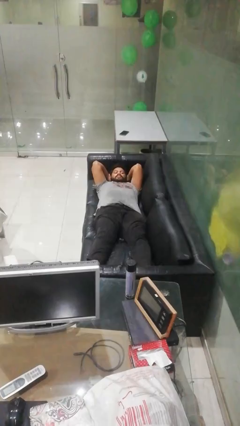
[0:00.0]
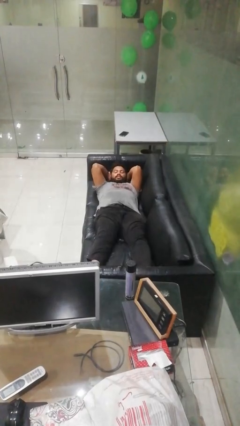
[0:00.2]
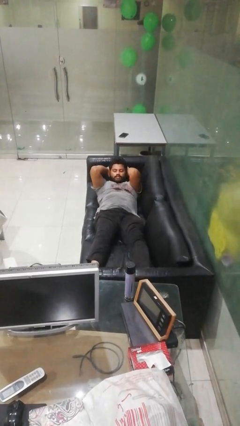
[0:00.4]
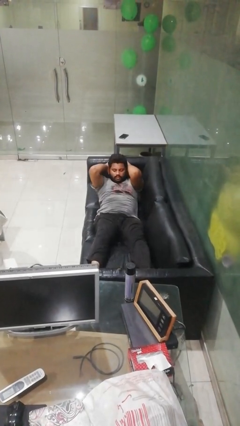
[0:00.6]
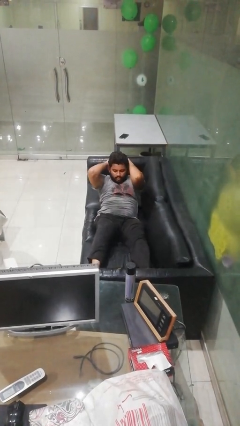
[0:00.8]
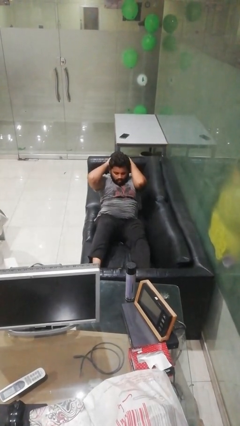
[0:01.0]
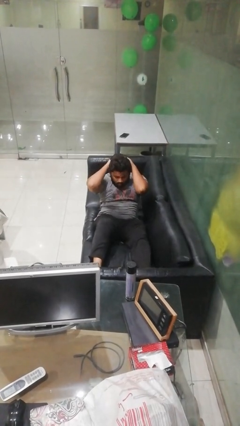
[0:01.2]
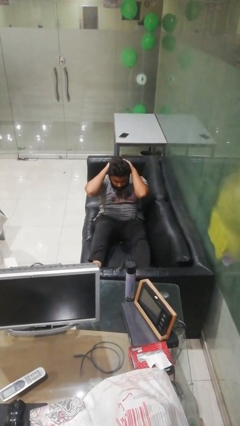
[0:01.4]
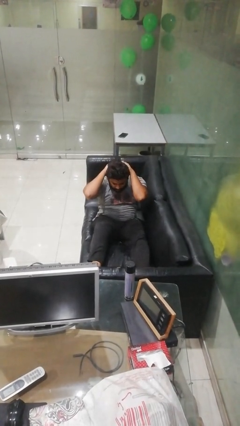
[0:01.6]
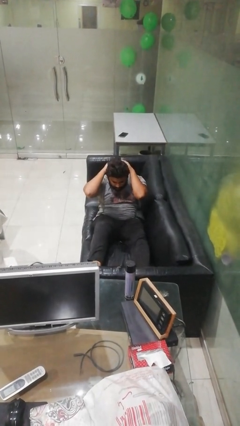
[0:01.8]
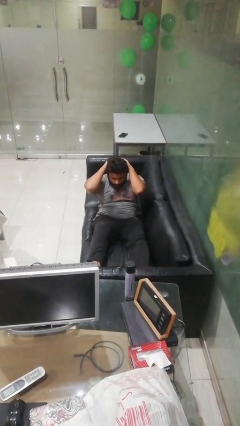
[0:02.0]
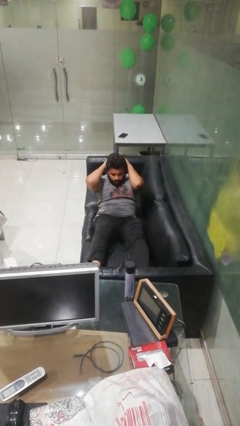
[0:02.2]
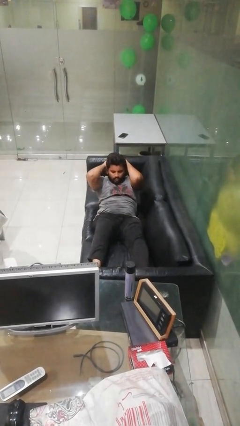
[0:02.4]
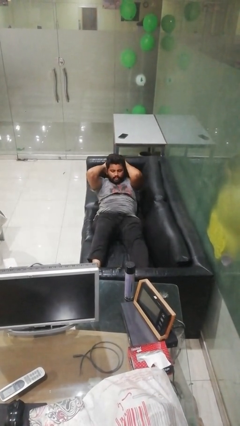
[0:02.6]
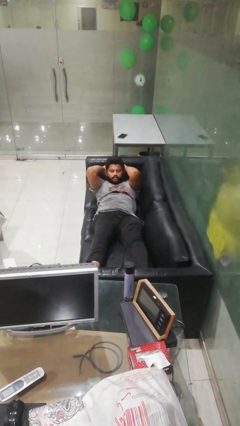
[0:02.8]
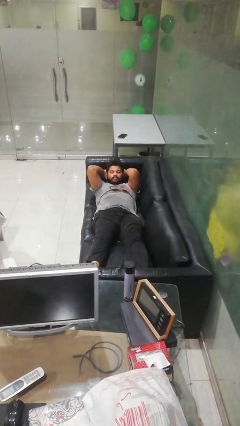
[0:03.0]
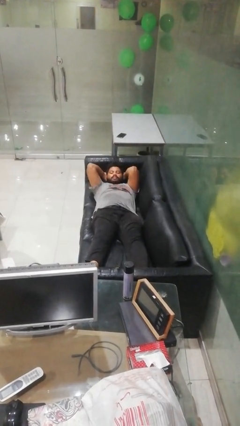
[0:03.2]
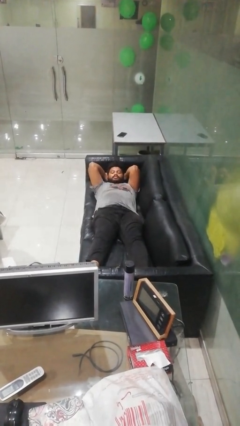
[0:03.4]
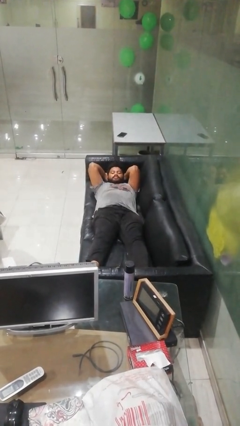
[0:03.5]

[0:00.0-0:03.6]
person exercises with situp

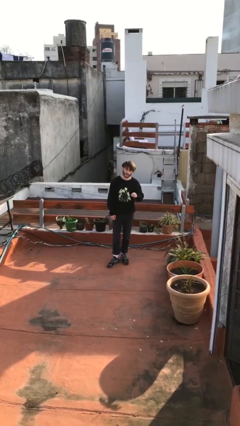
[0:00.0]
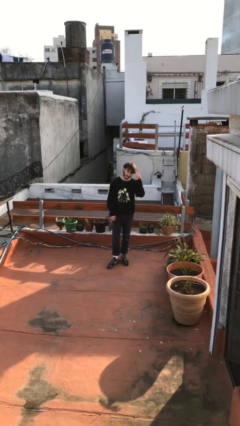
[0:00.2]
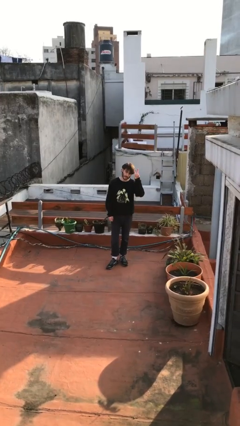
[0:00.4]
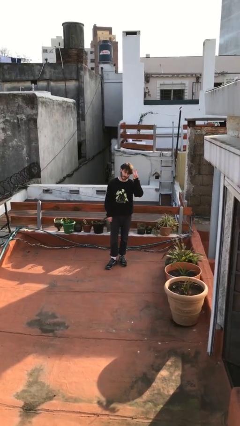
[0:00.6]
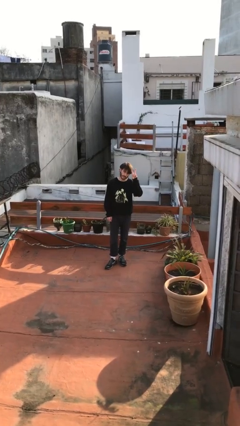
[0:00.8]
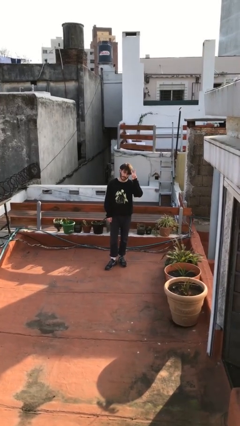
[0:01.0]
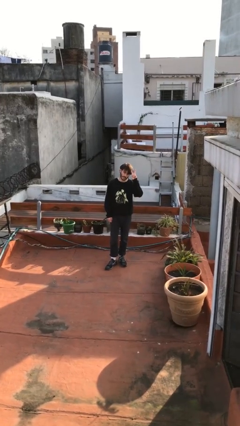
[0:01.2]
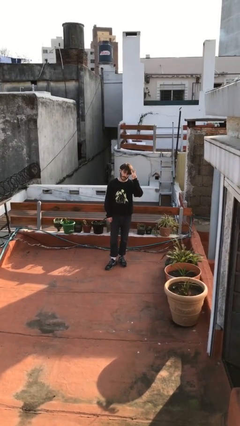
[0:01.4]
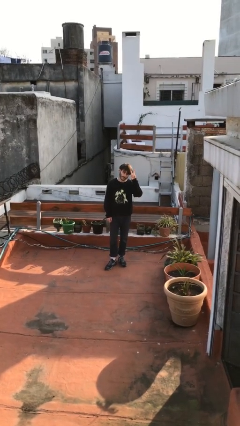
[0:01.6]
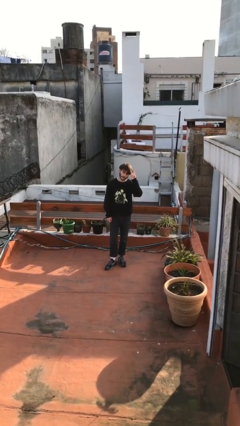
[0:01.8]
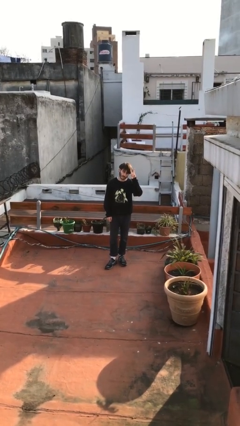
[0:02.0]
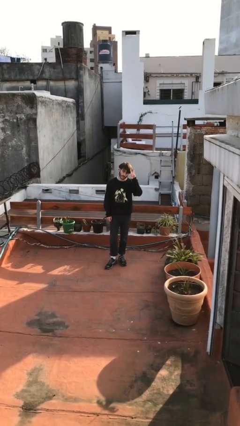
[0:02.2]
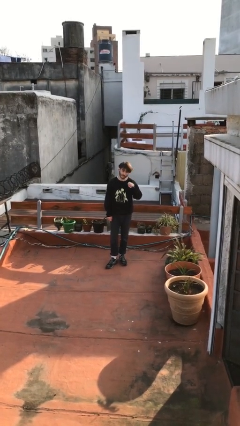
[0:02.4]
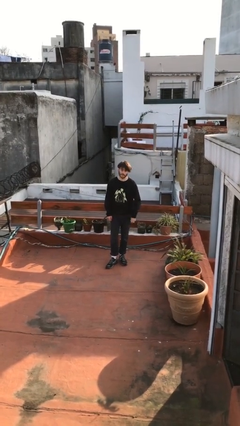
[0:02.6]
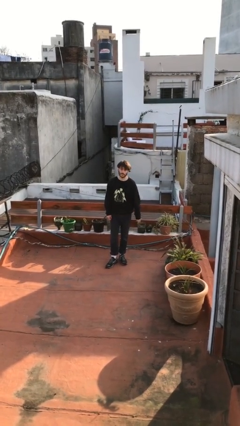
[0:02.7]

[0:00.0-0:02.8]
person gestures peace

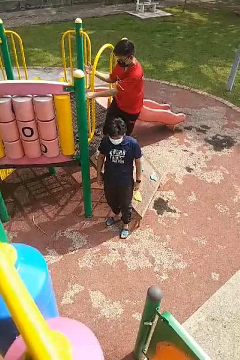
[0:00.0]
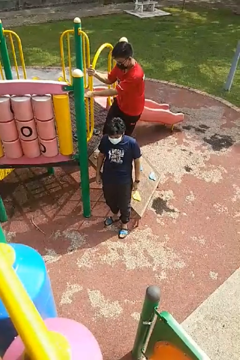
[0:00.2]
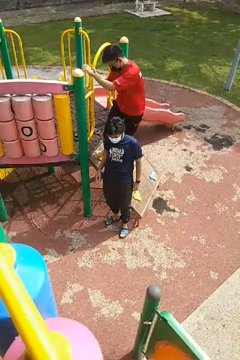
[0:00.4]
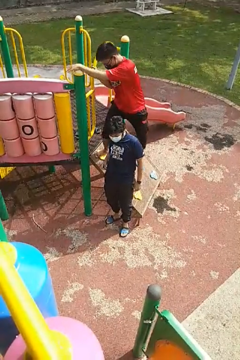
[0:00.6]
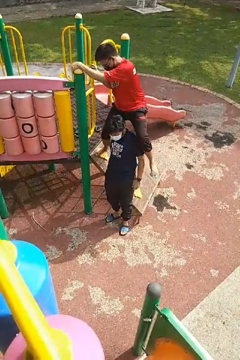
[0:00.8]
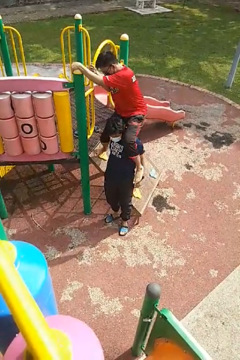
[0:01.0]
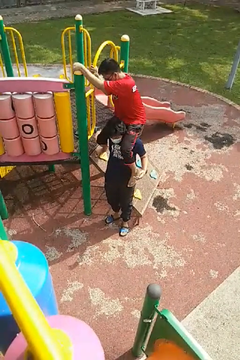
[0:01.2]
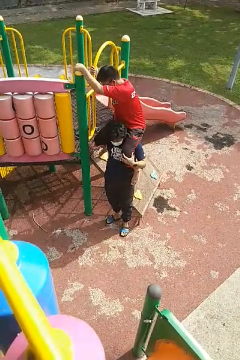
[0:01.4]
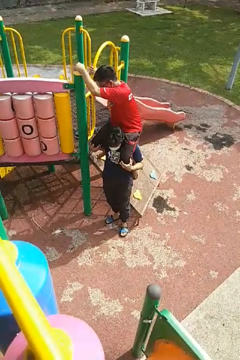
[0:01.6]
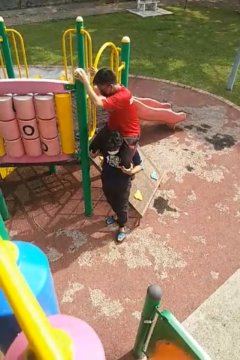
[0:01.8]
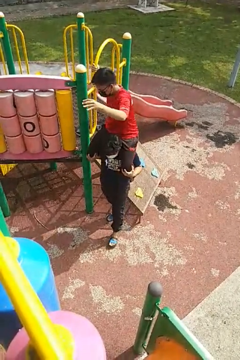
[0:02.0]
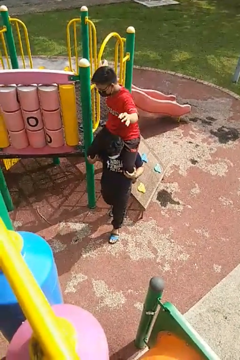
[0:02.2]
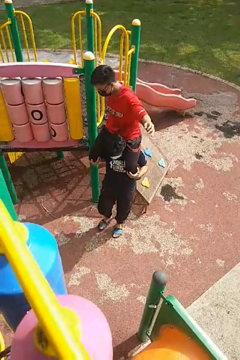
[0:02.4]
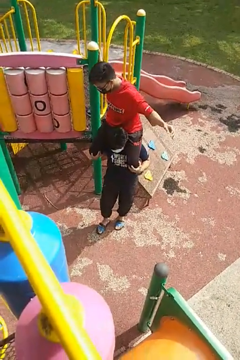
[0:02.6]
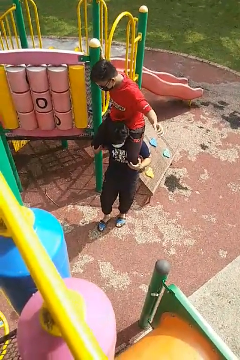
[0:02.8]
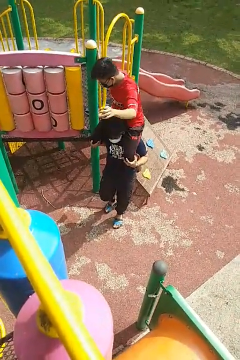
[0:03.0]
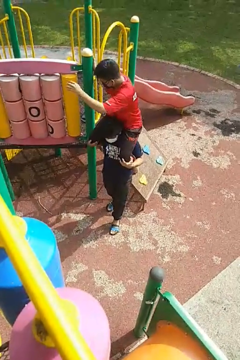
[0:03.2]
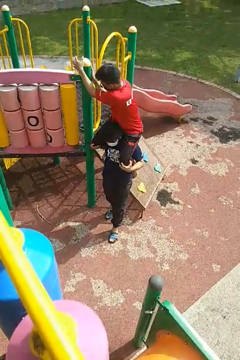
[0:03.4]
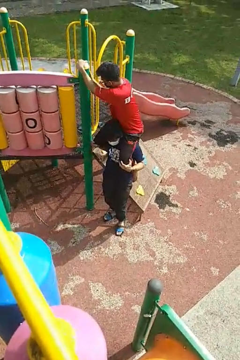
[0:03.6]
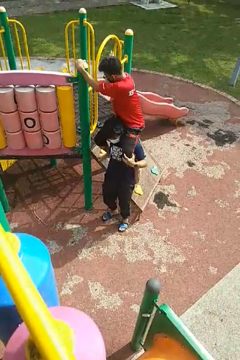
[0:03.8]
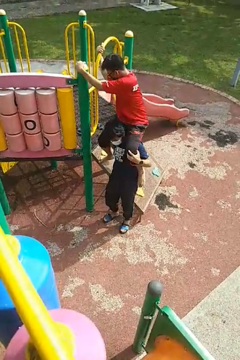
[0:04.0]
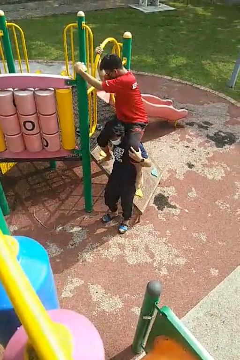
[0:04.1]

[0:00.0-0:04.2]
person carries person on shoulders

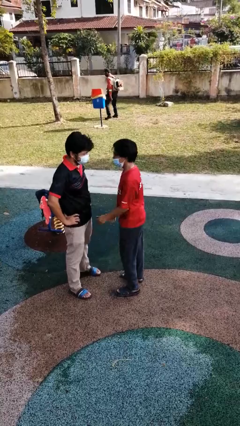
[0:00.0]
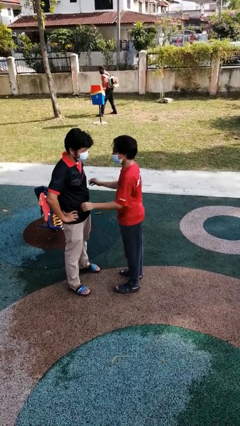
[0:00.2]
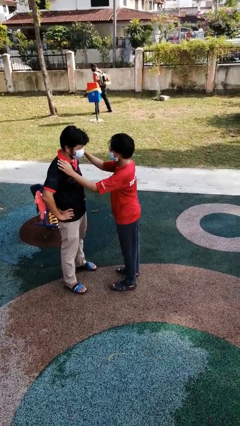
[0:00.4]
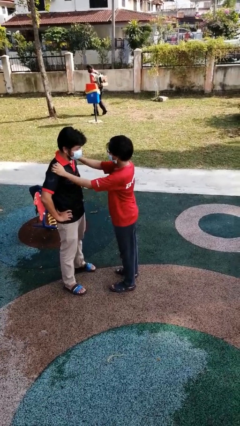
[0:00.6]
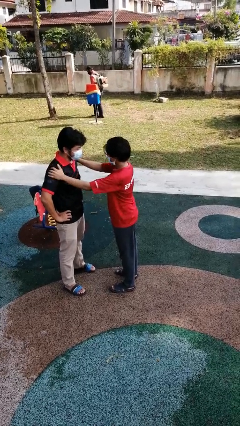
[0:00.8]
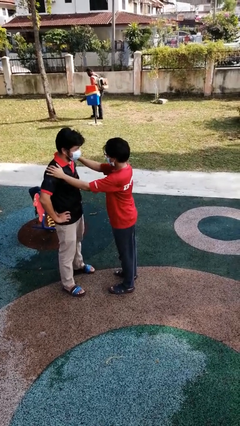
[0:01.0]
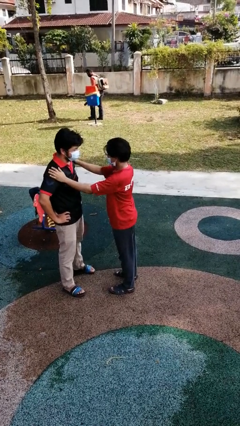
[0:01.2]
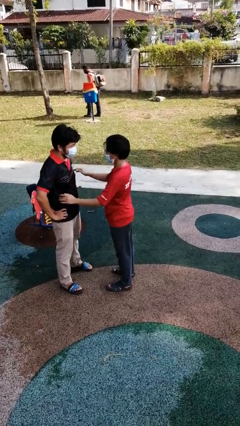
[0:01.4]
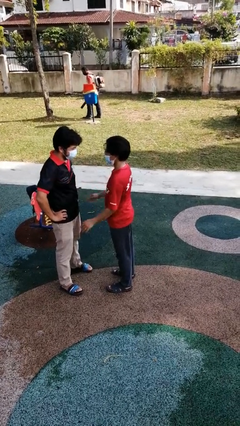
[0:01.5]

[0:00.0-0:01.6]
person pounds shoulders of person

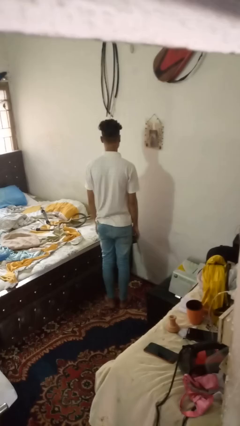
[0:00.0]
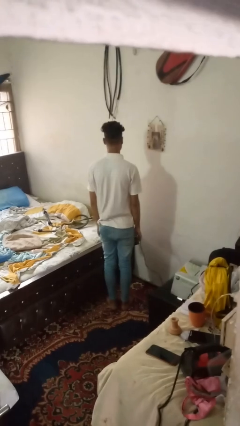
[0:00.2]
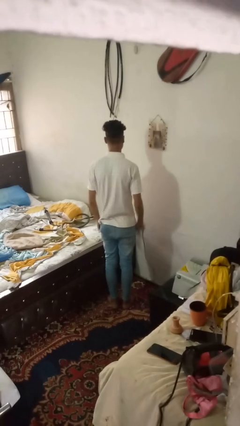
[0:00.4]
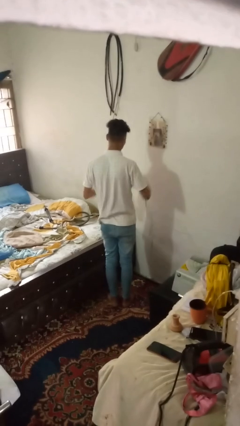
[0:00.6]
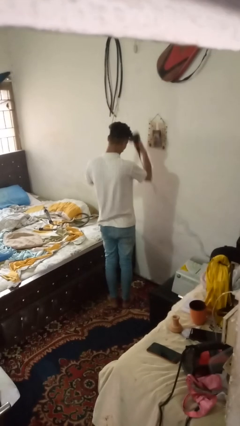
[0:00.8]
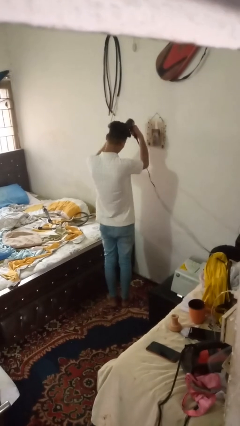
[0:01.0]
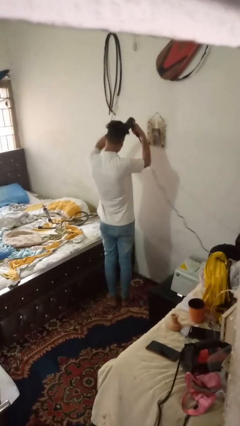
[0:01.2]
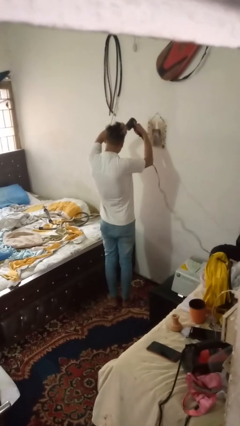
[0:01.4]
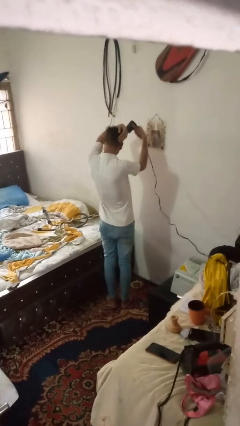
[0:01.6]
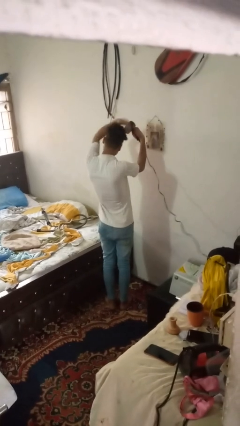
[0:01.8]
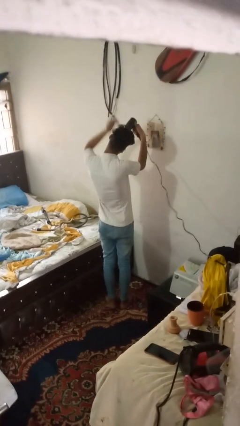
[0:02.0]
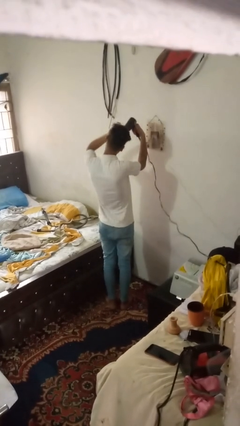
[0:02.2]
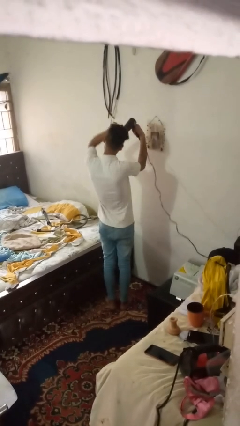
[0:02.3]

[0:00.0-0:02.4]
person dries hair with hairdryer

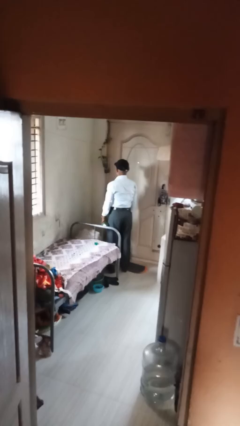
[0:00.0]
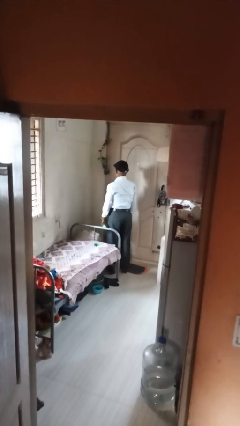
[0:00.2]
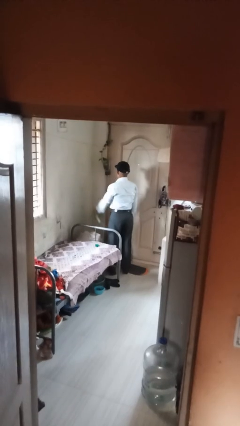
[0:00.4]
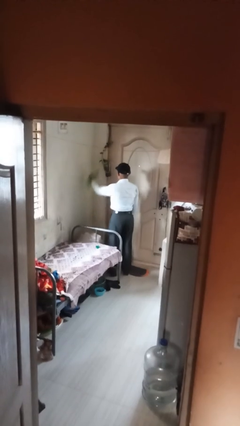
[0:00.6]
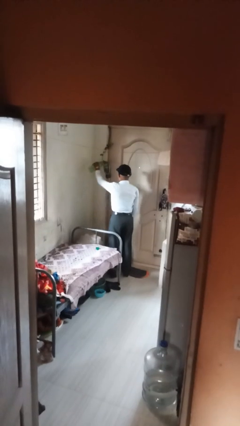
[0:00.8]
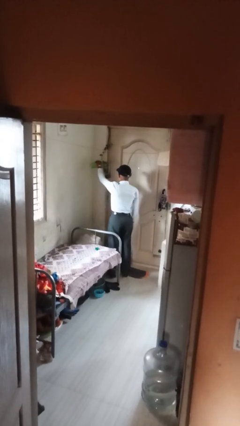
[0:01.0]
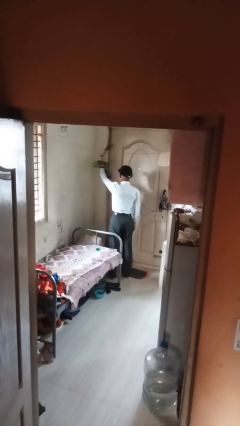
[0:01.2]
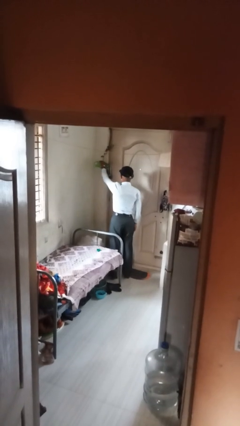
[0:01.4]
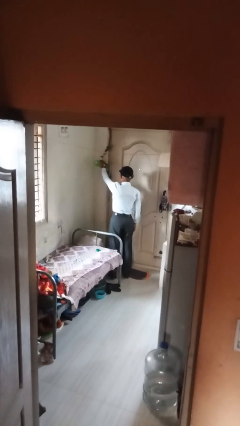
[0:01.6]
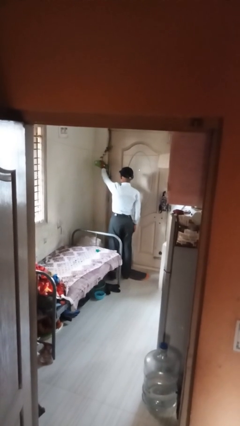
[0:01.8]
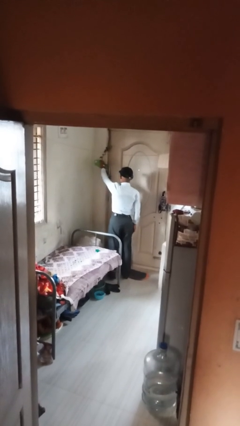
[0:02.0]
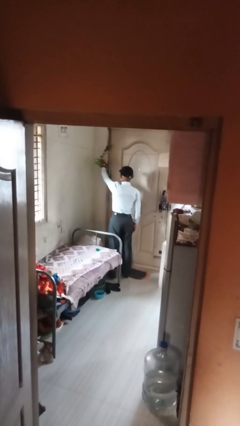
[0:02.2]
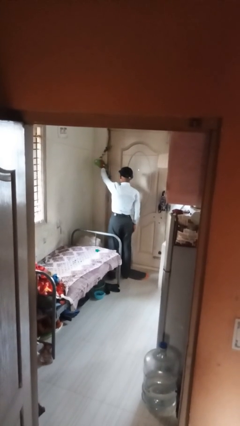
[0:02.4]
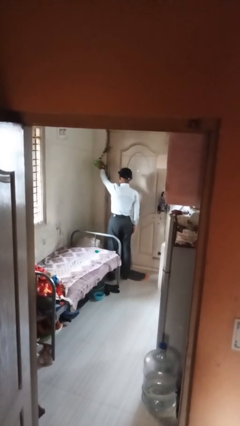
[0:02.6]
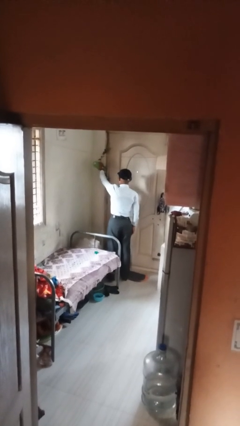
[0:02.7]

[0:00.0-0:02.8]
person waters houseplant

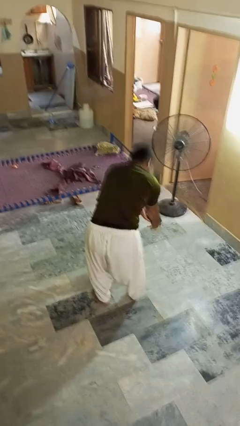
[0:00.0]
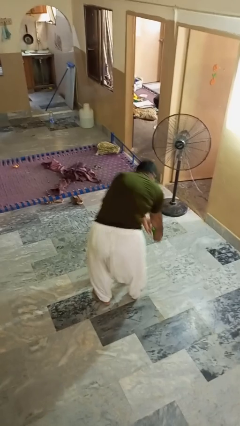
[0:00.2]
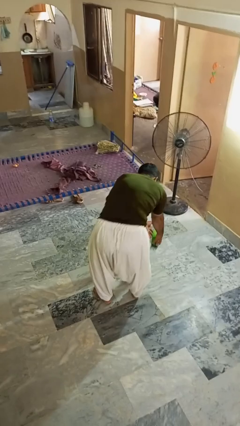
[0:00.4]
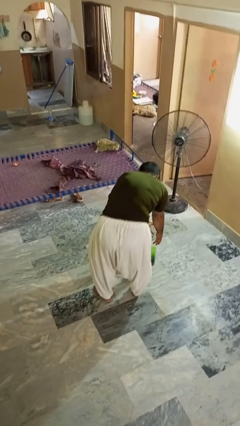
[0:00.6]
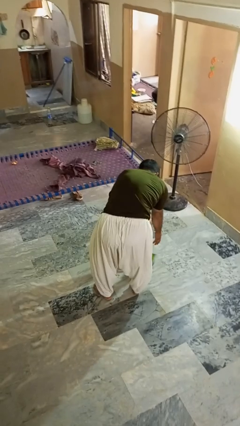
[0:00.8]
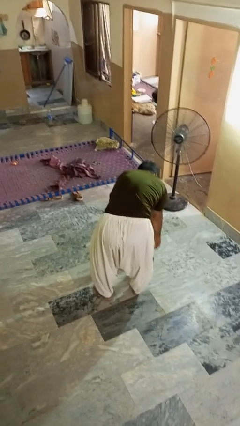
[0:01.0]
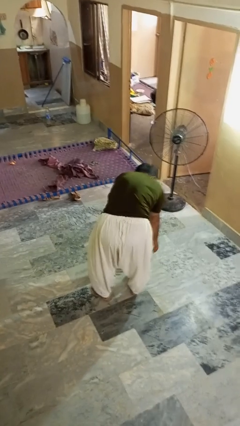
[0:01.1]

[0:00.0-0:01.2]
person catches dropped object
